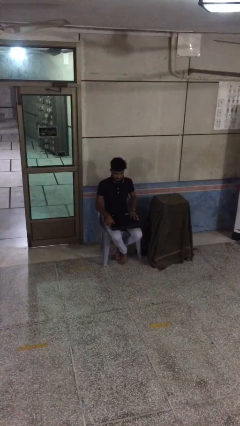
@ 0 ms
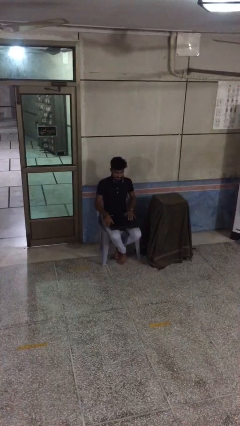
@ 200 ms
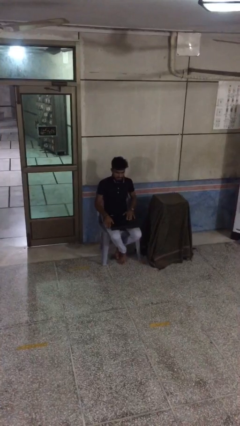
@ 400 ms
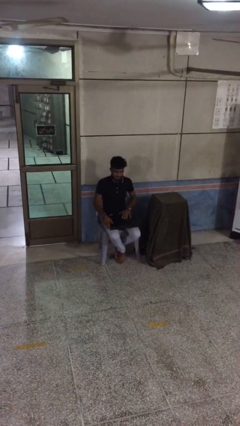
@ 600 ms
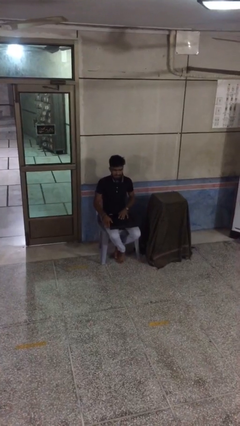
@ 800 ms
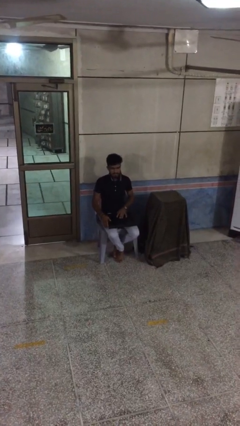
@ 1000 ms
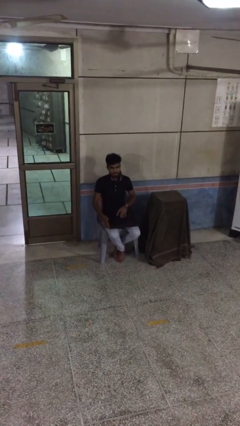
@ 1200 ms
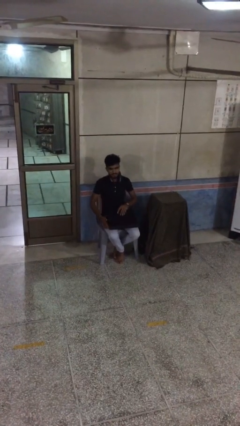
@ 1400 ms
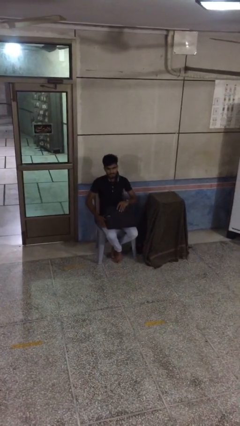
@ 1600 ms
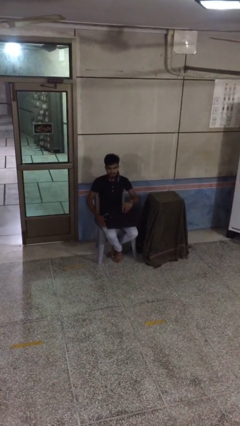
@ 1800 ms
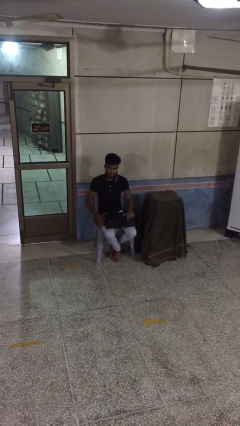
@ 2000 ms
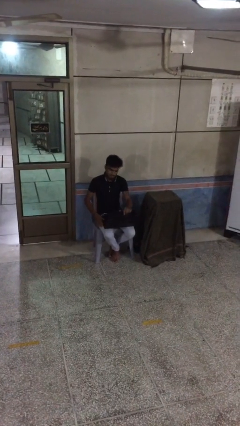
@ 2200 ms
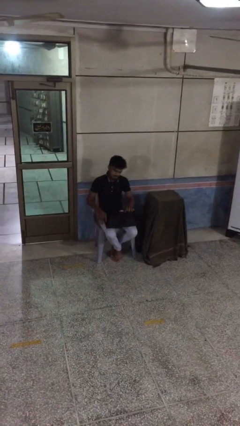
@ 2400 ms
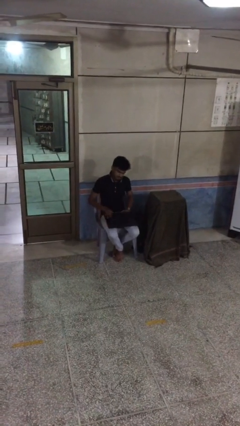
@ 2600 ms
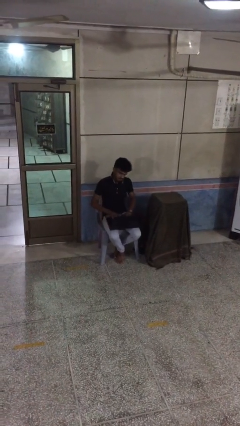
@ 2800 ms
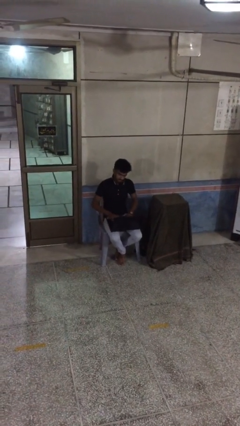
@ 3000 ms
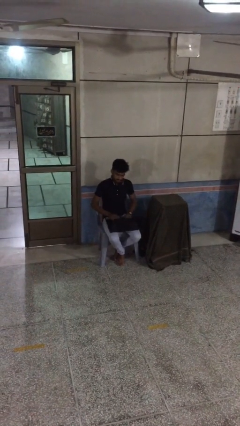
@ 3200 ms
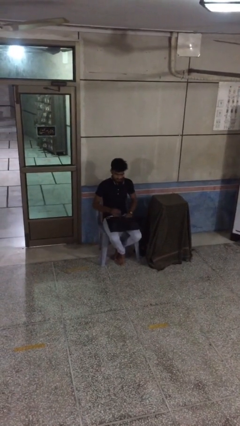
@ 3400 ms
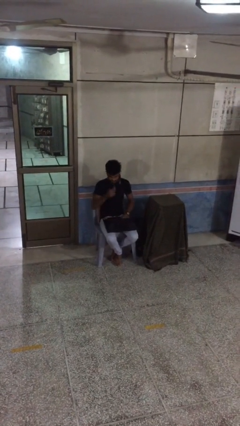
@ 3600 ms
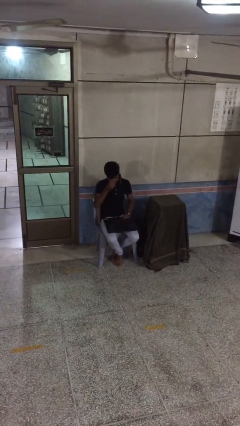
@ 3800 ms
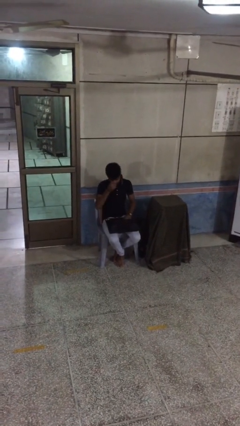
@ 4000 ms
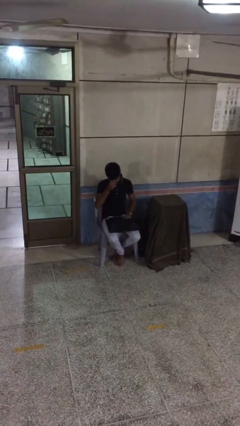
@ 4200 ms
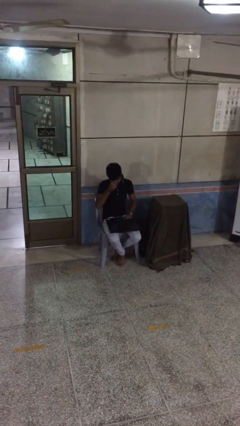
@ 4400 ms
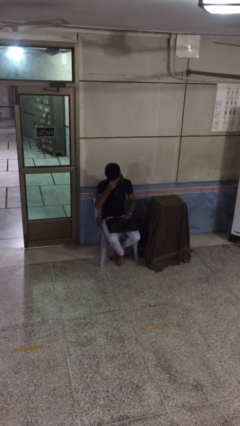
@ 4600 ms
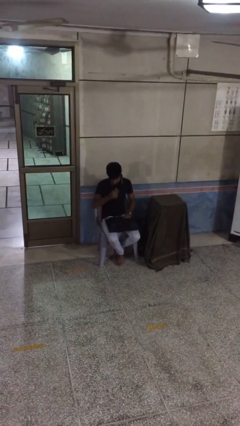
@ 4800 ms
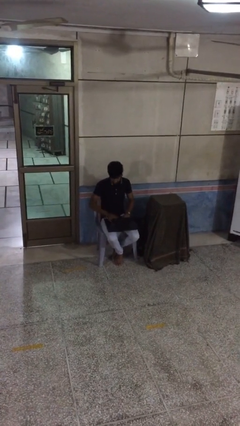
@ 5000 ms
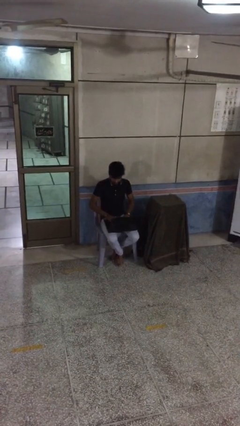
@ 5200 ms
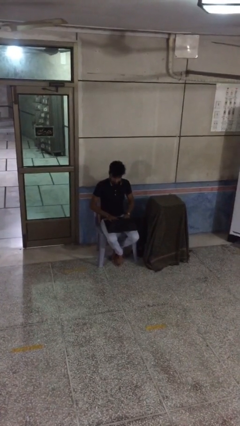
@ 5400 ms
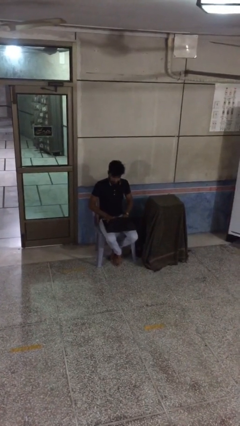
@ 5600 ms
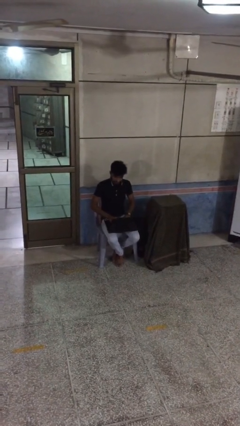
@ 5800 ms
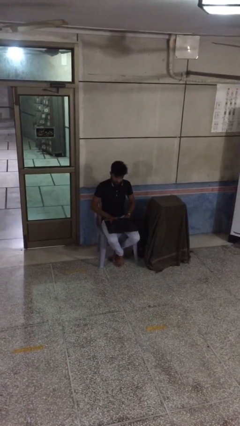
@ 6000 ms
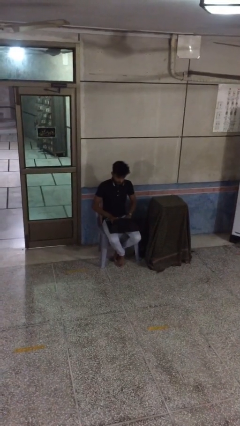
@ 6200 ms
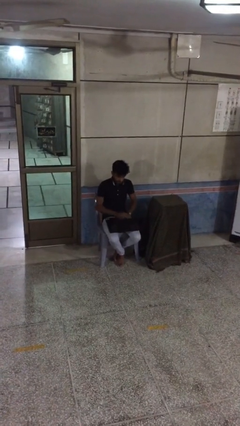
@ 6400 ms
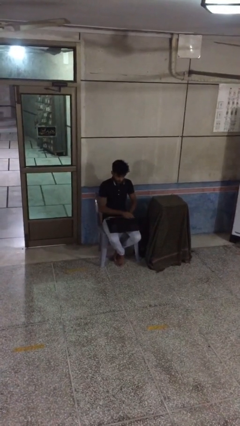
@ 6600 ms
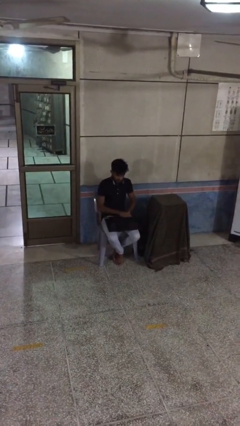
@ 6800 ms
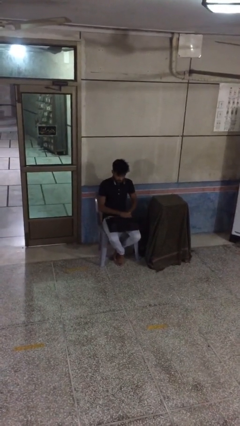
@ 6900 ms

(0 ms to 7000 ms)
person interacts with laptop

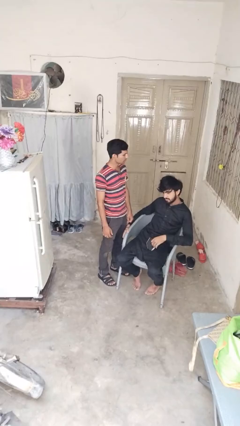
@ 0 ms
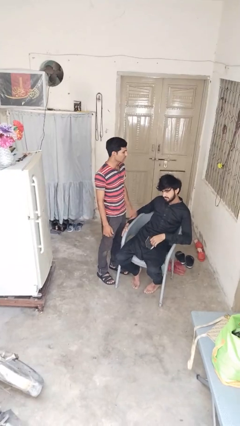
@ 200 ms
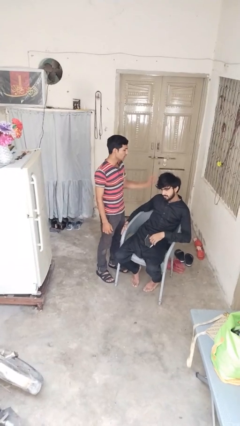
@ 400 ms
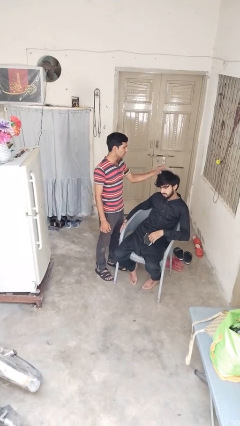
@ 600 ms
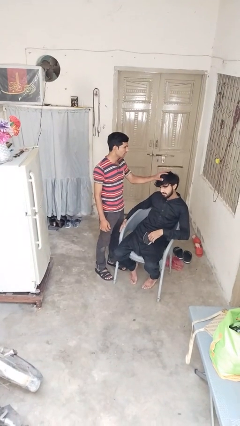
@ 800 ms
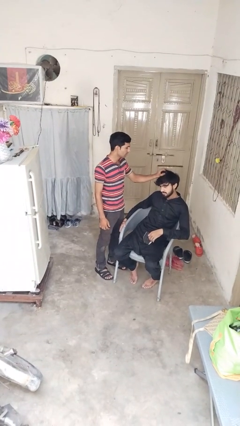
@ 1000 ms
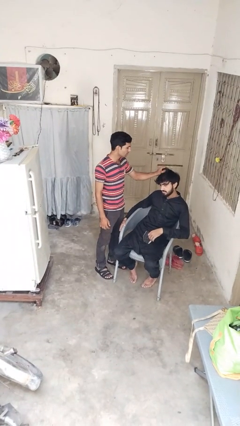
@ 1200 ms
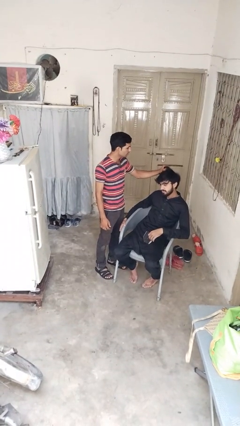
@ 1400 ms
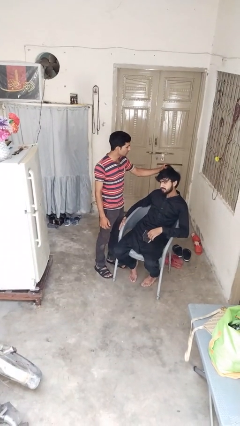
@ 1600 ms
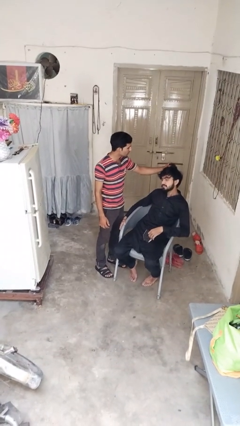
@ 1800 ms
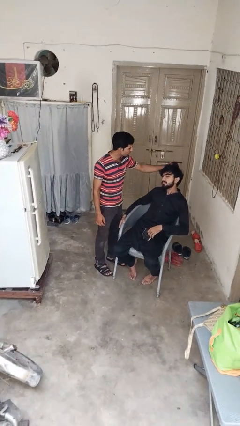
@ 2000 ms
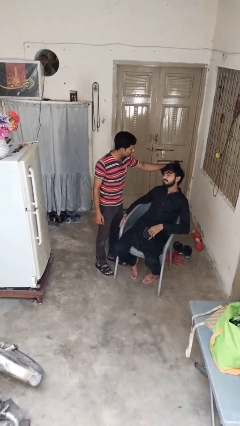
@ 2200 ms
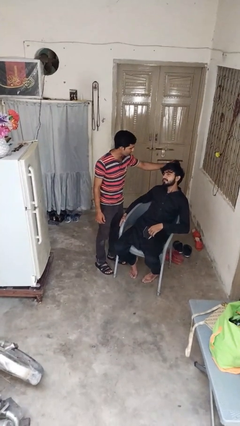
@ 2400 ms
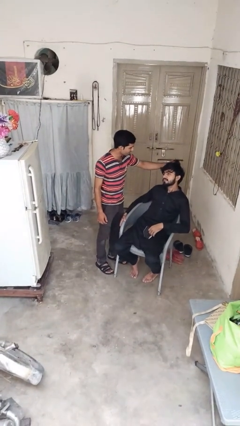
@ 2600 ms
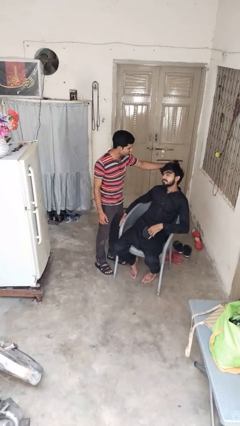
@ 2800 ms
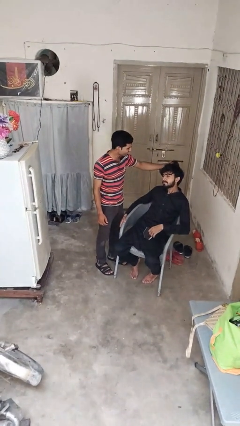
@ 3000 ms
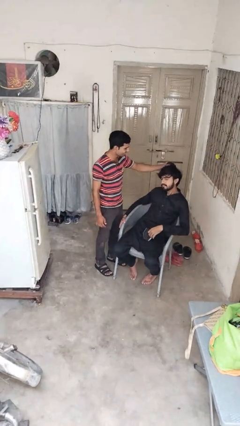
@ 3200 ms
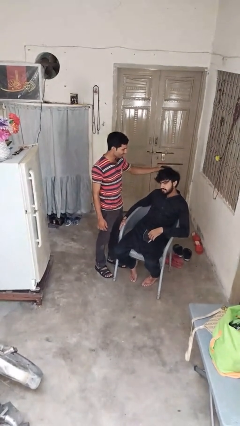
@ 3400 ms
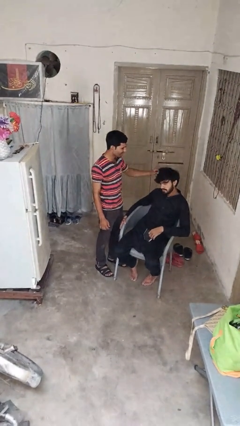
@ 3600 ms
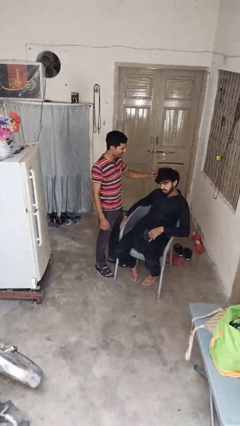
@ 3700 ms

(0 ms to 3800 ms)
person grabs person by hair

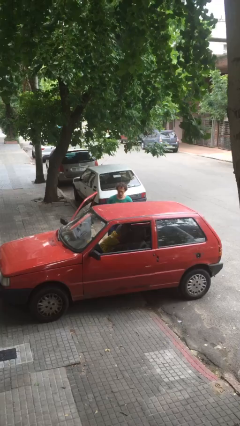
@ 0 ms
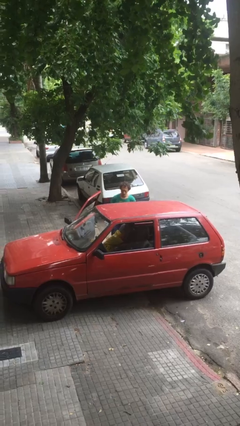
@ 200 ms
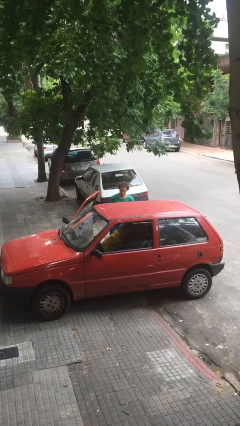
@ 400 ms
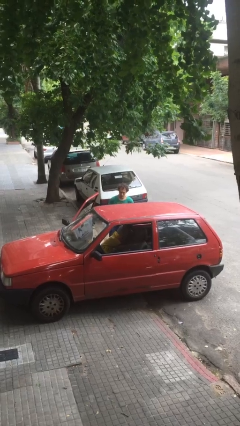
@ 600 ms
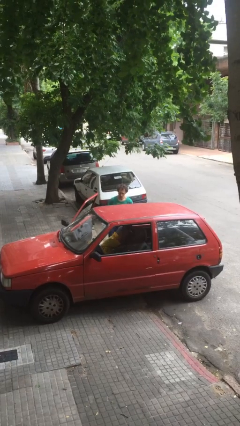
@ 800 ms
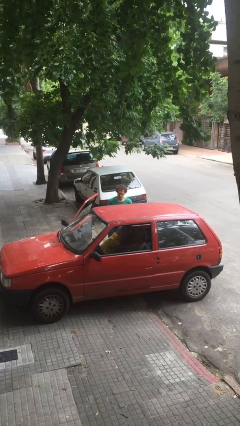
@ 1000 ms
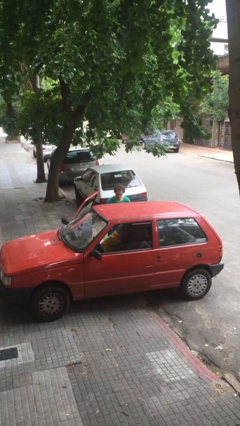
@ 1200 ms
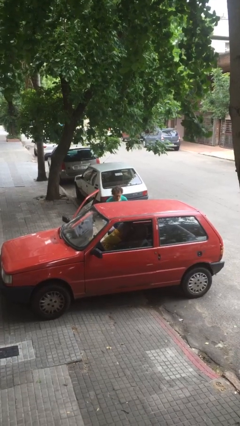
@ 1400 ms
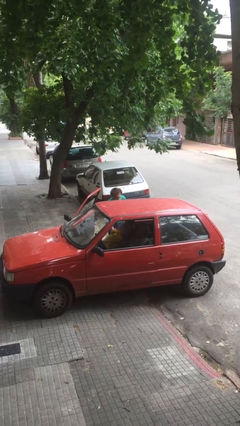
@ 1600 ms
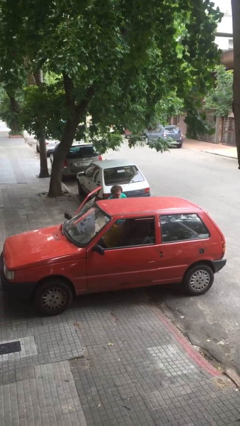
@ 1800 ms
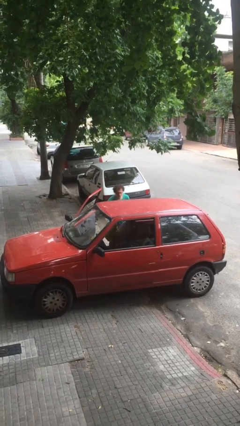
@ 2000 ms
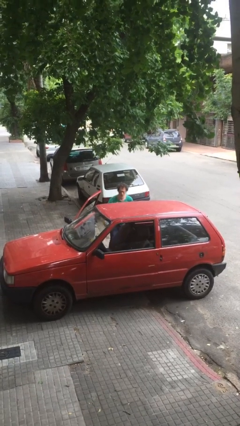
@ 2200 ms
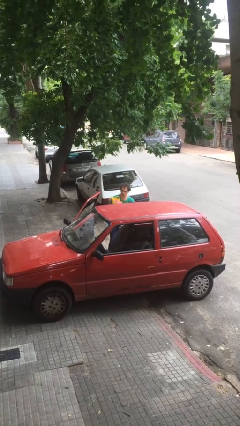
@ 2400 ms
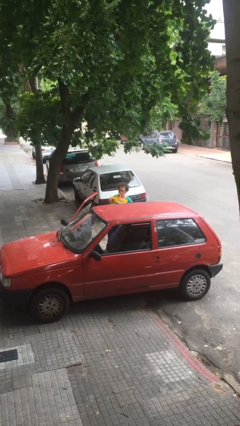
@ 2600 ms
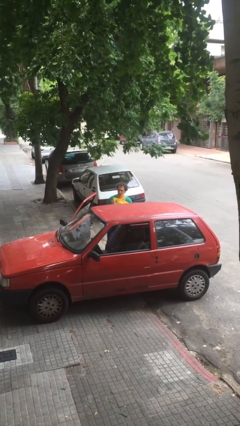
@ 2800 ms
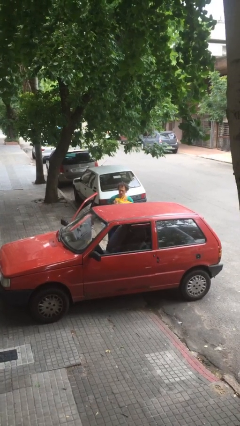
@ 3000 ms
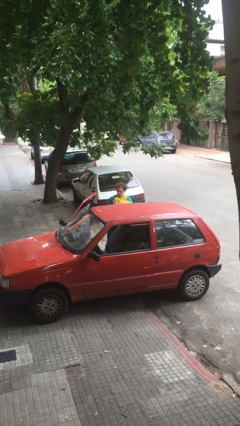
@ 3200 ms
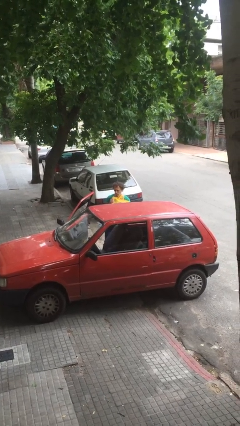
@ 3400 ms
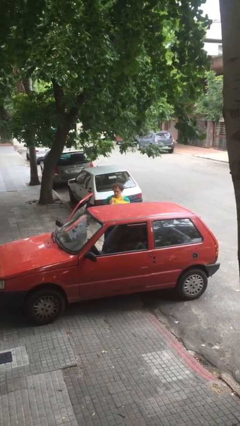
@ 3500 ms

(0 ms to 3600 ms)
person unloads car

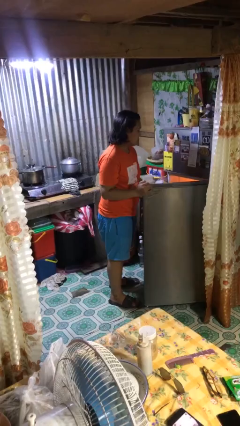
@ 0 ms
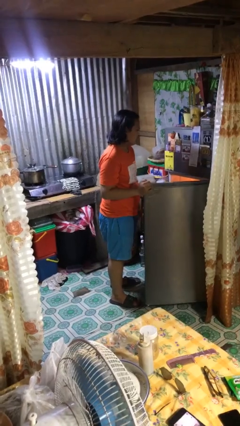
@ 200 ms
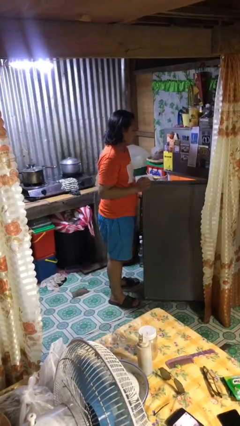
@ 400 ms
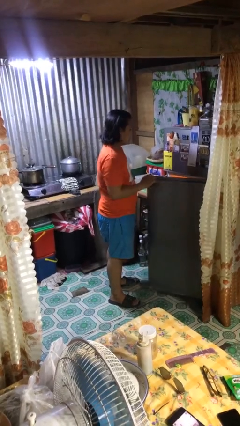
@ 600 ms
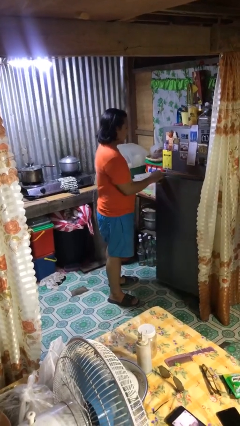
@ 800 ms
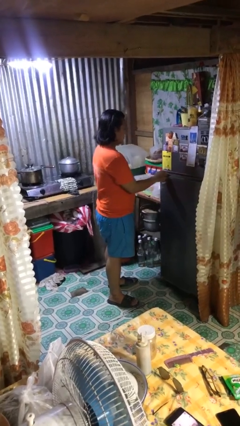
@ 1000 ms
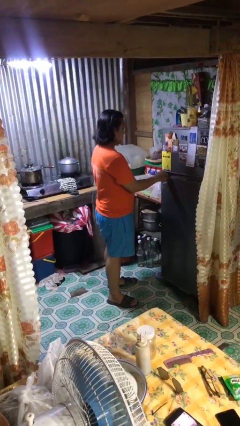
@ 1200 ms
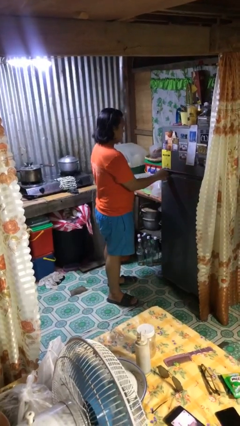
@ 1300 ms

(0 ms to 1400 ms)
person closes refrigerator

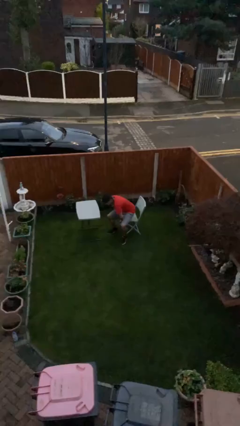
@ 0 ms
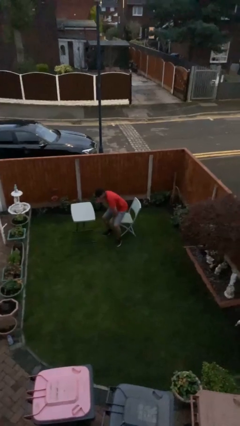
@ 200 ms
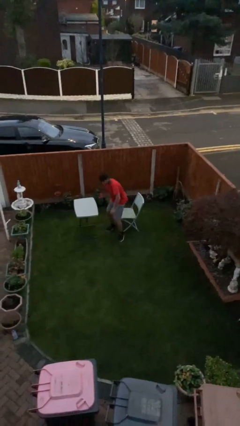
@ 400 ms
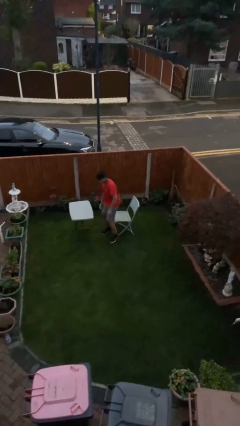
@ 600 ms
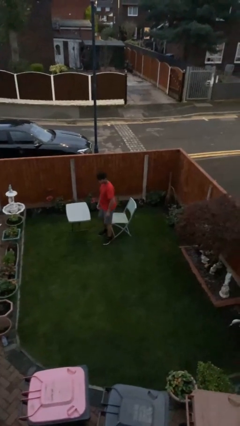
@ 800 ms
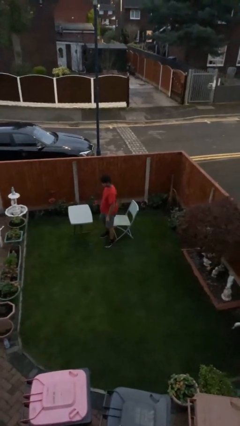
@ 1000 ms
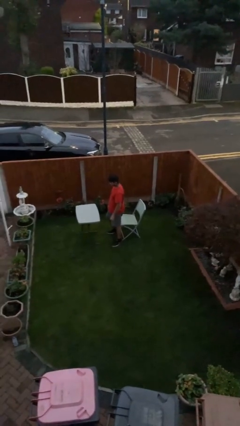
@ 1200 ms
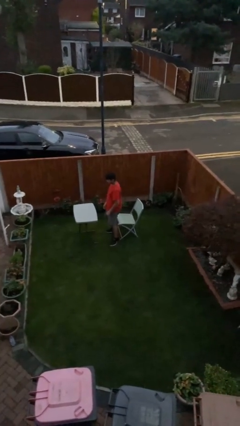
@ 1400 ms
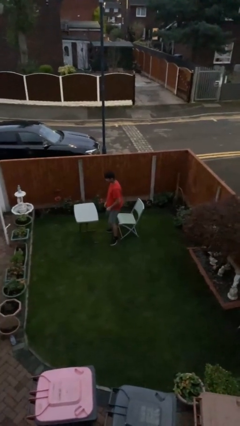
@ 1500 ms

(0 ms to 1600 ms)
person stands up
